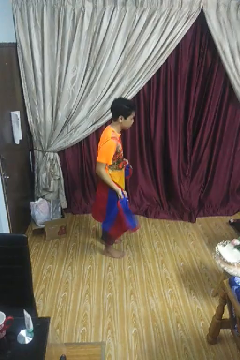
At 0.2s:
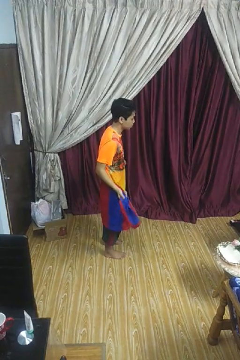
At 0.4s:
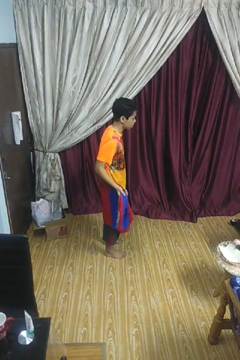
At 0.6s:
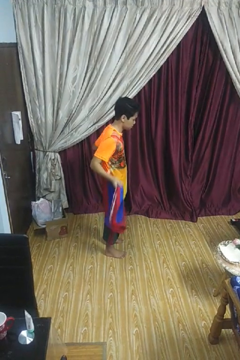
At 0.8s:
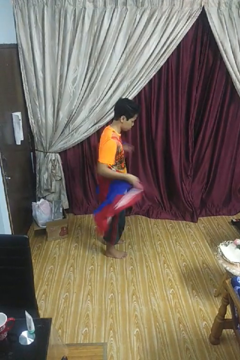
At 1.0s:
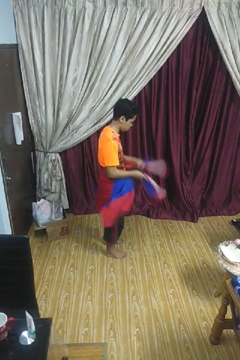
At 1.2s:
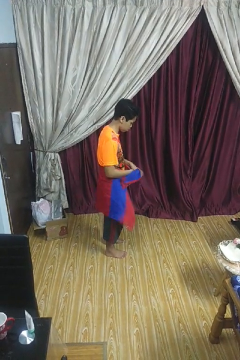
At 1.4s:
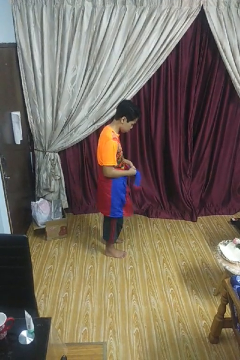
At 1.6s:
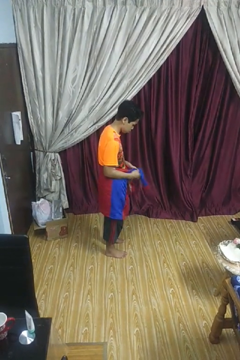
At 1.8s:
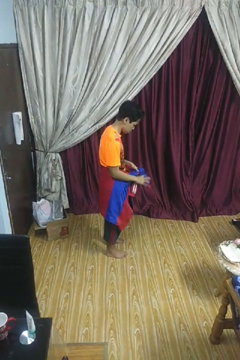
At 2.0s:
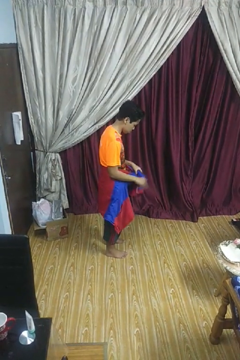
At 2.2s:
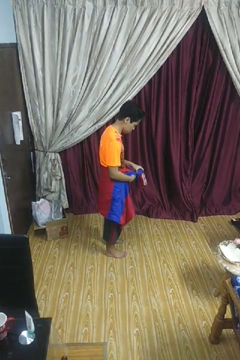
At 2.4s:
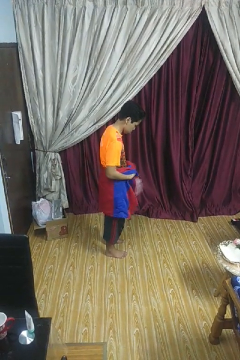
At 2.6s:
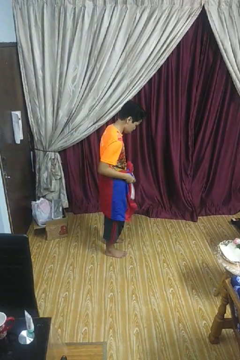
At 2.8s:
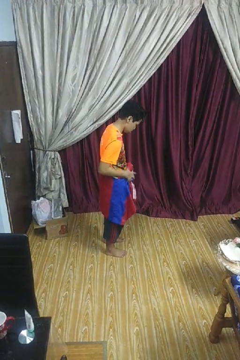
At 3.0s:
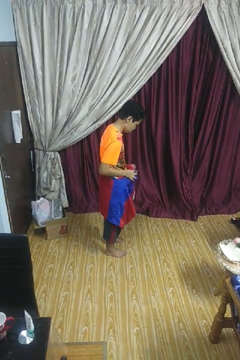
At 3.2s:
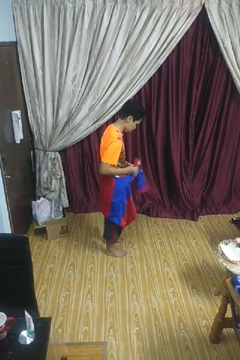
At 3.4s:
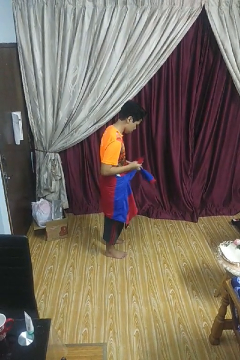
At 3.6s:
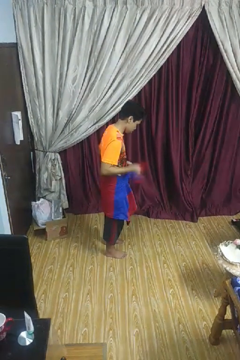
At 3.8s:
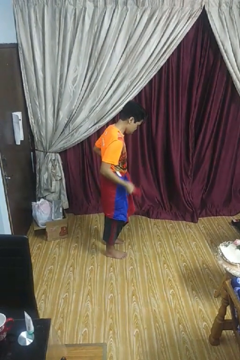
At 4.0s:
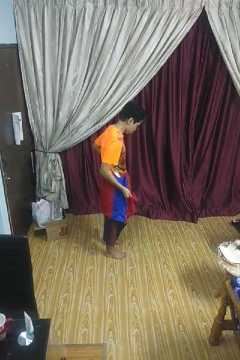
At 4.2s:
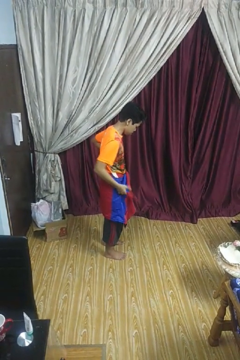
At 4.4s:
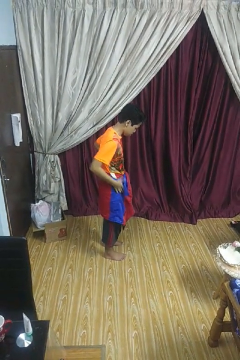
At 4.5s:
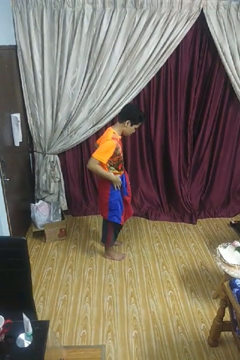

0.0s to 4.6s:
person ties jacket around waist

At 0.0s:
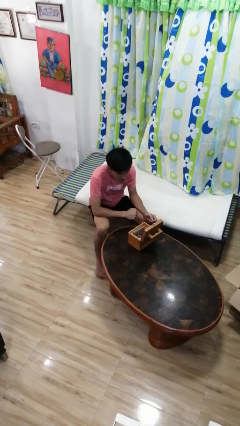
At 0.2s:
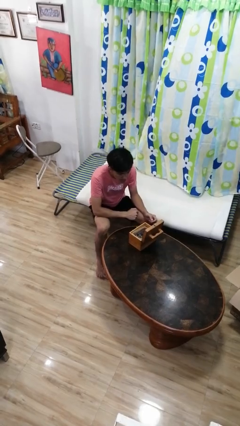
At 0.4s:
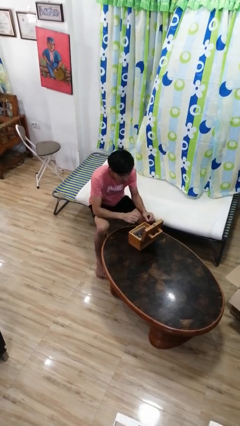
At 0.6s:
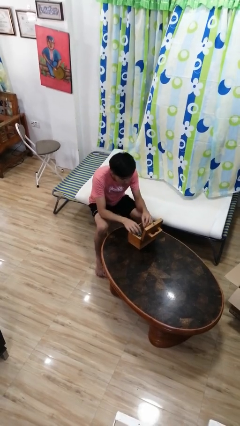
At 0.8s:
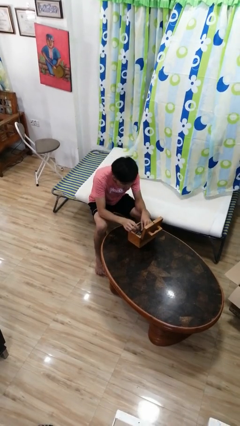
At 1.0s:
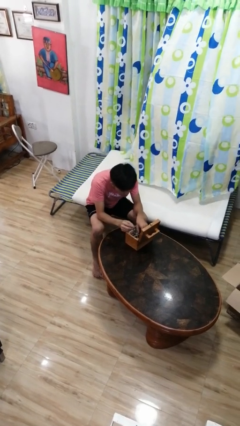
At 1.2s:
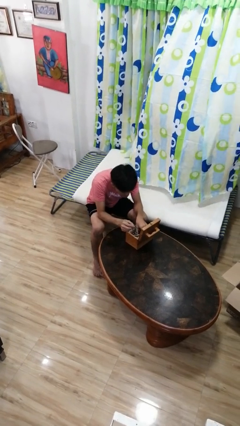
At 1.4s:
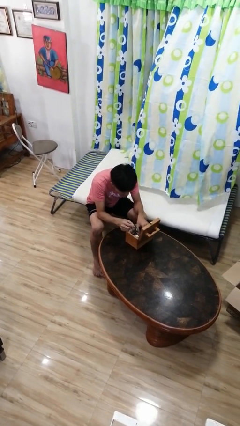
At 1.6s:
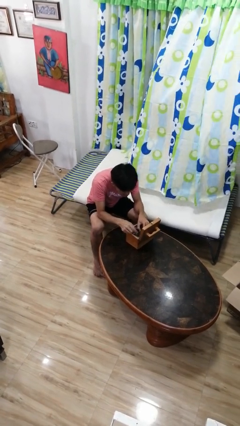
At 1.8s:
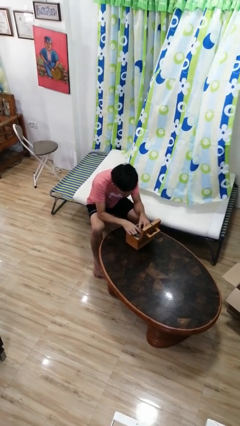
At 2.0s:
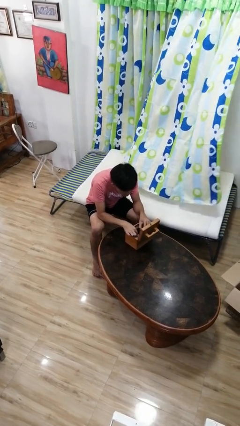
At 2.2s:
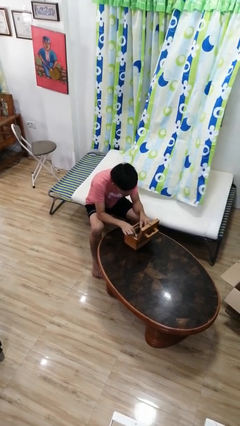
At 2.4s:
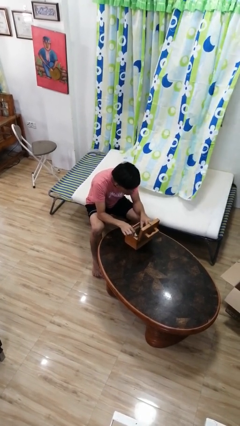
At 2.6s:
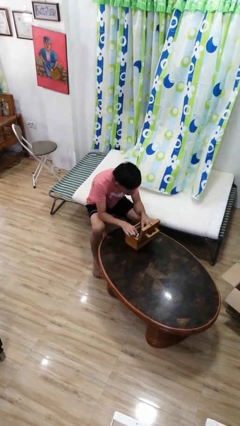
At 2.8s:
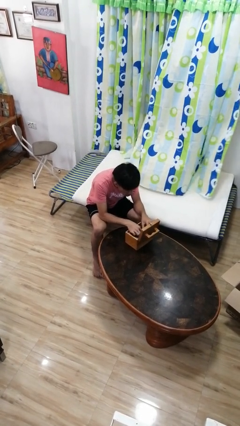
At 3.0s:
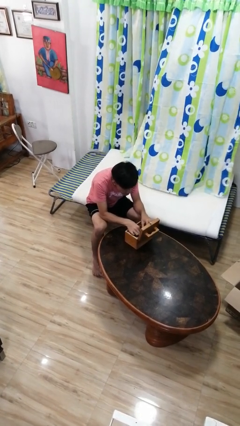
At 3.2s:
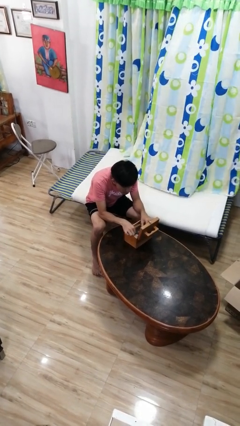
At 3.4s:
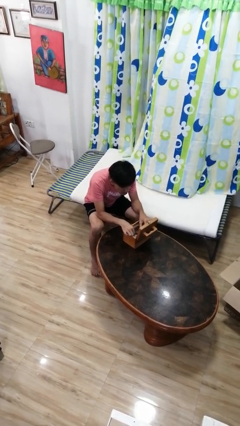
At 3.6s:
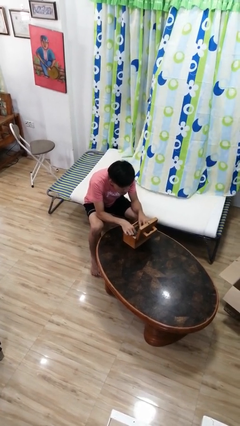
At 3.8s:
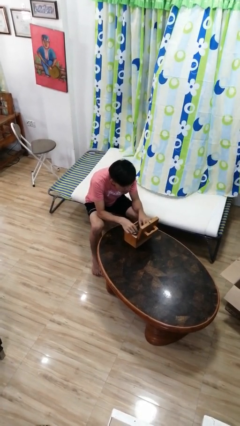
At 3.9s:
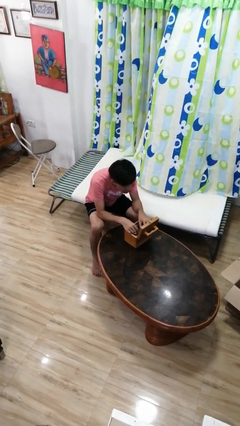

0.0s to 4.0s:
person searches jewelry box

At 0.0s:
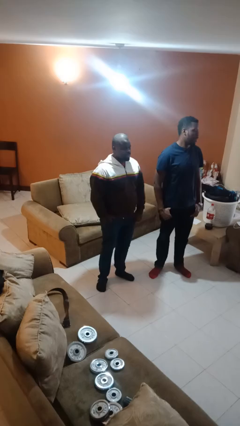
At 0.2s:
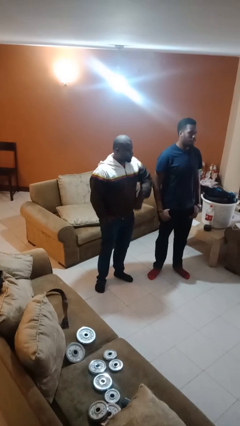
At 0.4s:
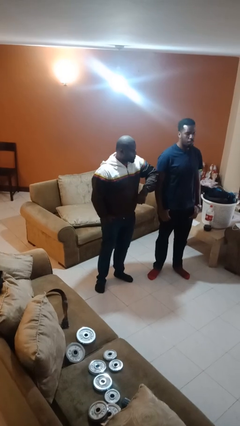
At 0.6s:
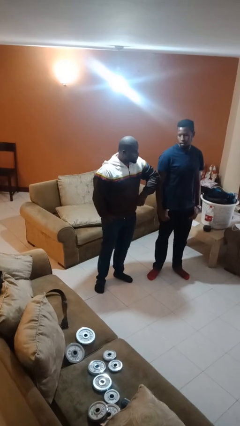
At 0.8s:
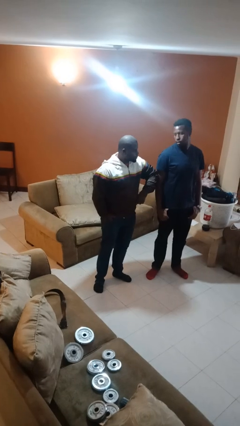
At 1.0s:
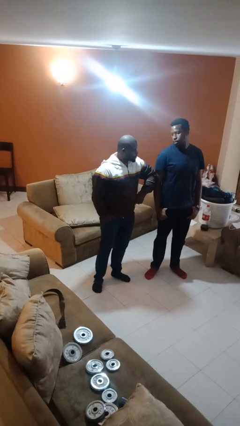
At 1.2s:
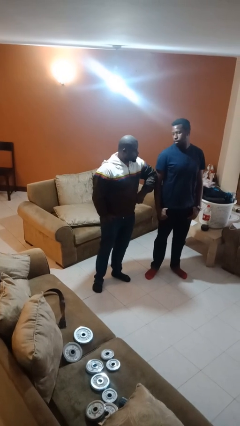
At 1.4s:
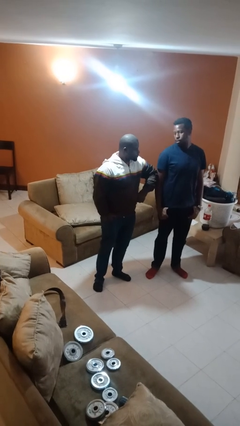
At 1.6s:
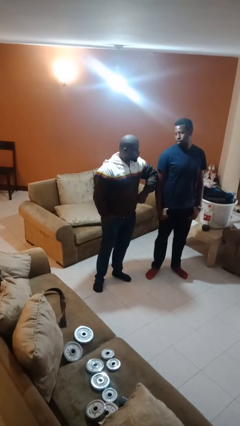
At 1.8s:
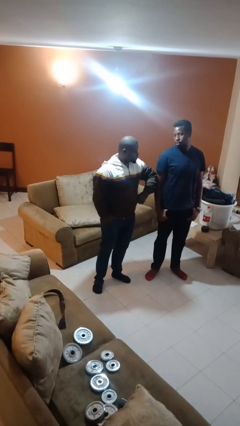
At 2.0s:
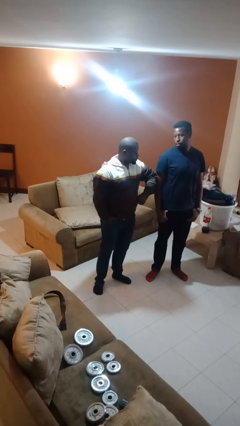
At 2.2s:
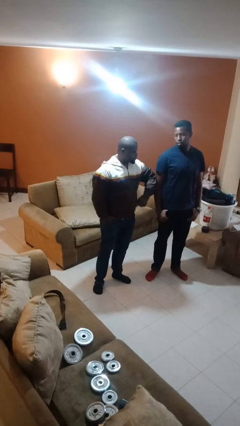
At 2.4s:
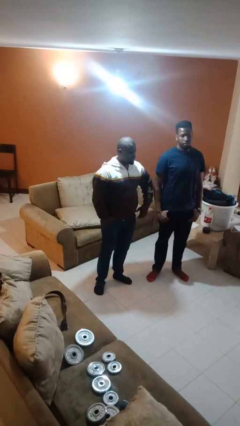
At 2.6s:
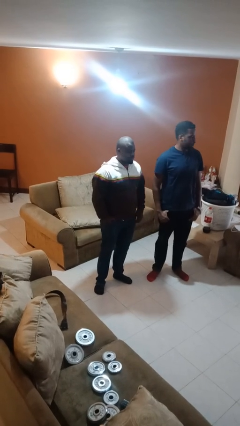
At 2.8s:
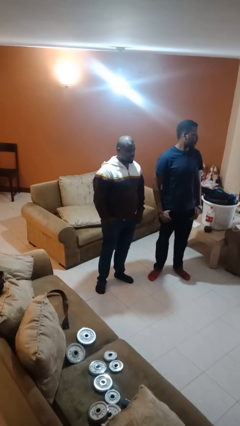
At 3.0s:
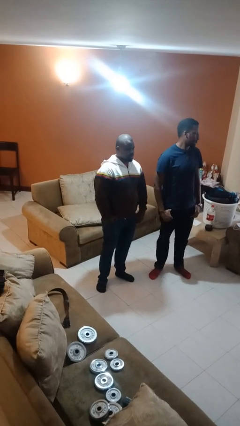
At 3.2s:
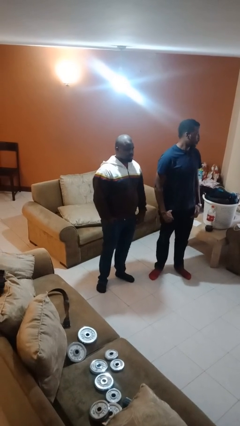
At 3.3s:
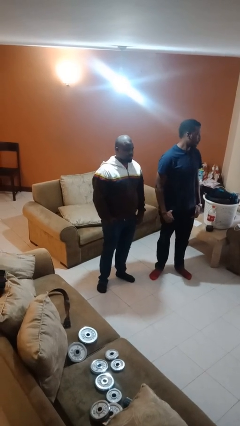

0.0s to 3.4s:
person nudges person with elbow

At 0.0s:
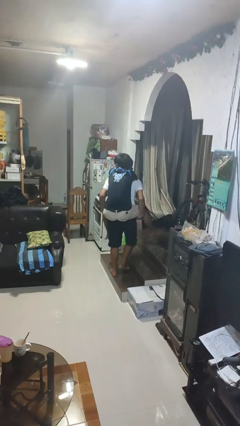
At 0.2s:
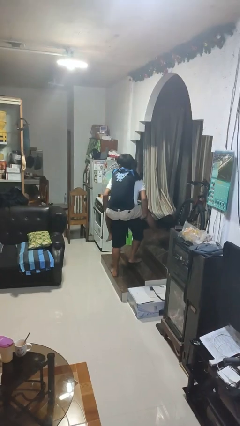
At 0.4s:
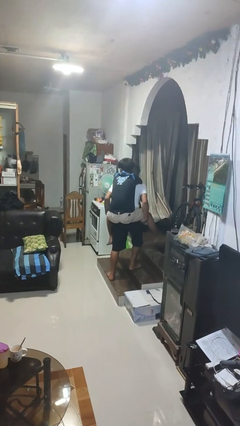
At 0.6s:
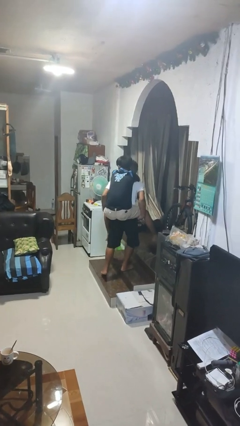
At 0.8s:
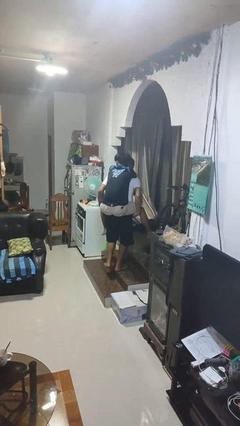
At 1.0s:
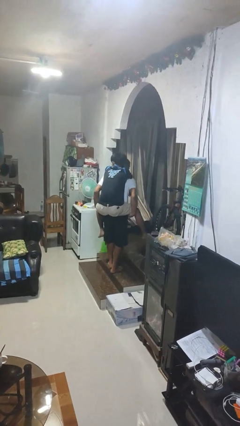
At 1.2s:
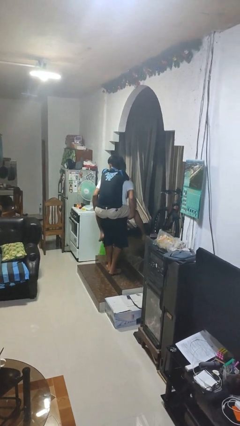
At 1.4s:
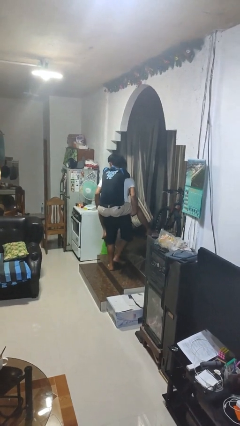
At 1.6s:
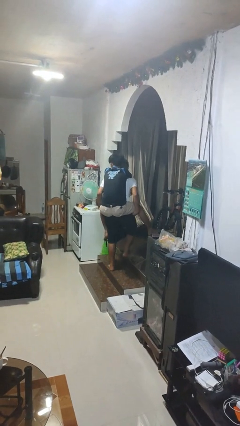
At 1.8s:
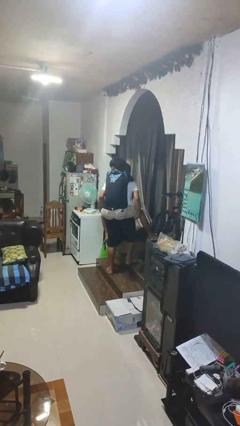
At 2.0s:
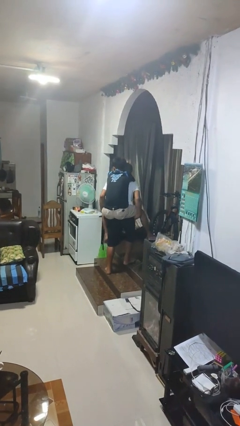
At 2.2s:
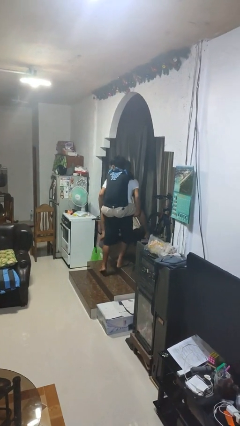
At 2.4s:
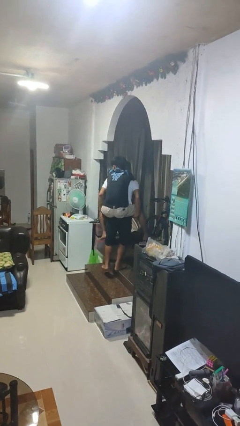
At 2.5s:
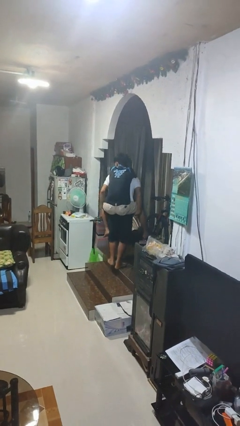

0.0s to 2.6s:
person carries person on back

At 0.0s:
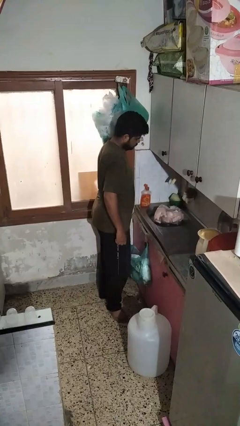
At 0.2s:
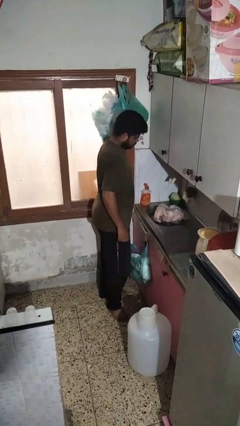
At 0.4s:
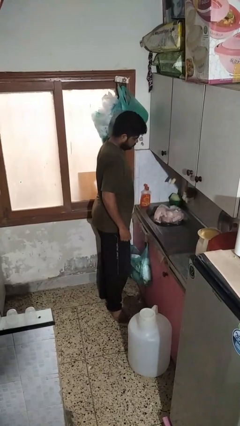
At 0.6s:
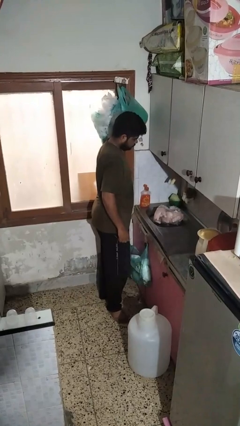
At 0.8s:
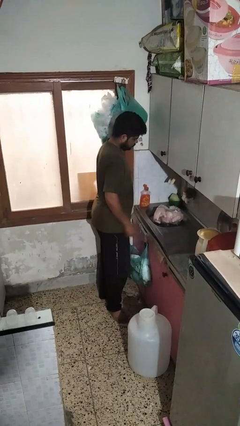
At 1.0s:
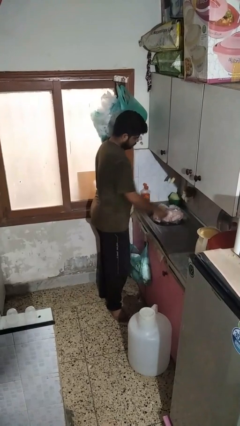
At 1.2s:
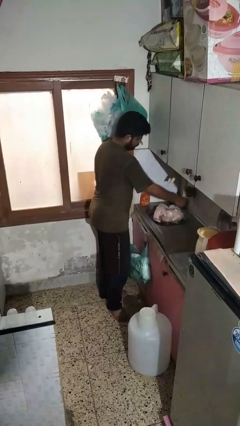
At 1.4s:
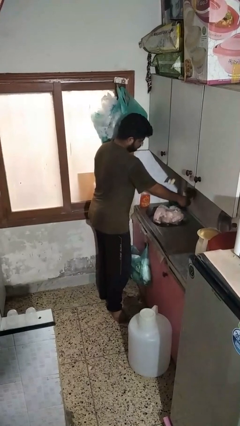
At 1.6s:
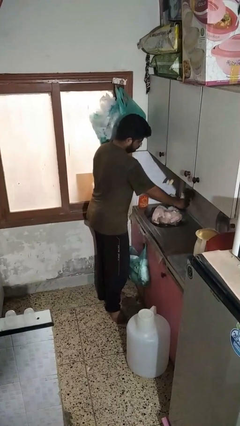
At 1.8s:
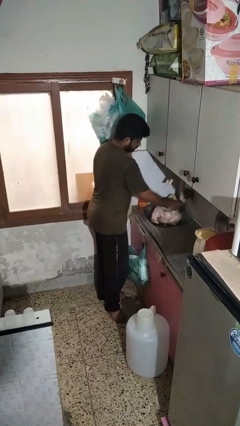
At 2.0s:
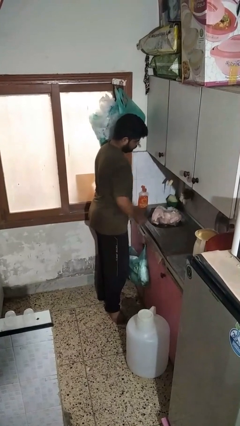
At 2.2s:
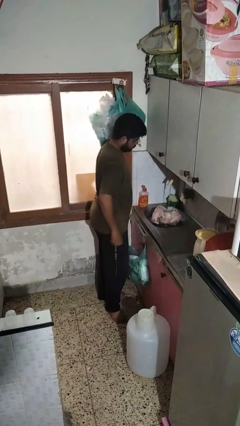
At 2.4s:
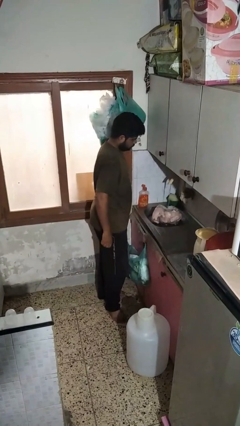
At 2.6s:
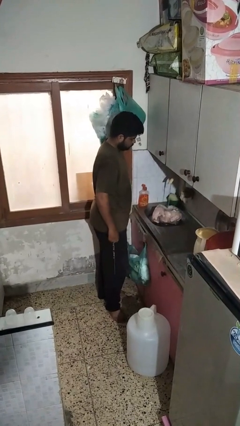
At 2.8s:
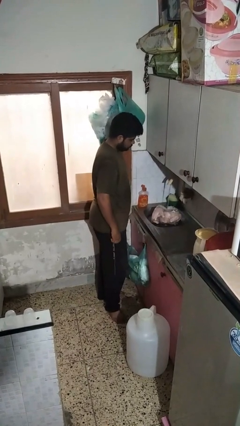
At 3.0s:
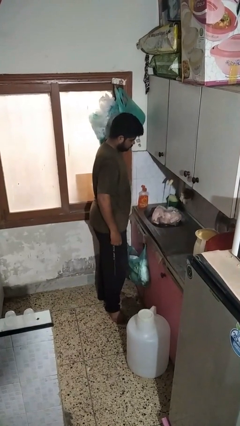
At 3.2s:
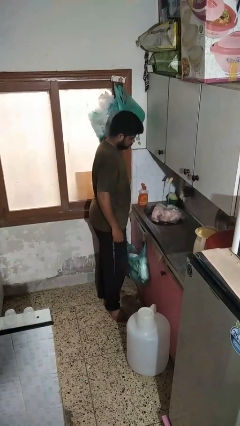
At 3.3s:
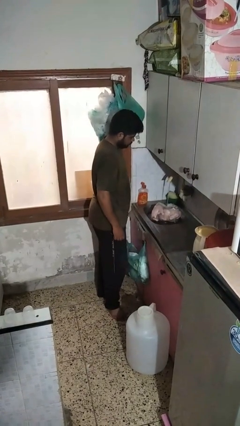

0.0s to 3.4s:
person turns on faucet

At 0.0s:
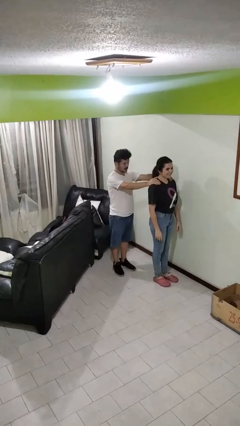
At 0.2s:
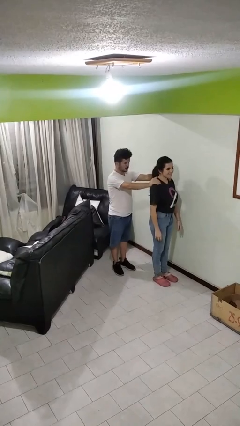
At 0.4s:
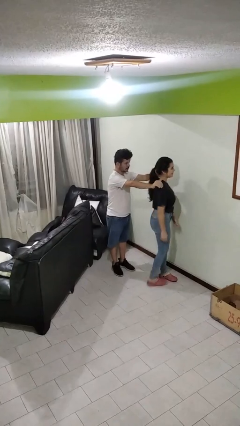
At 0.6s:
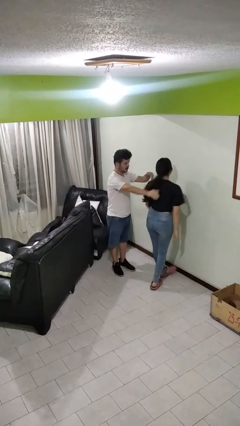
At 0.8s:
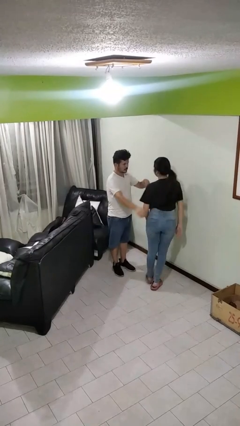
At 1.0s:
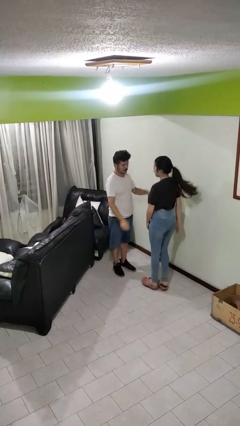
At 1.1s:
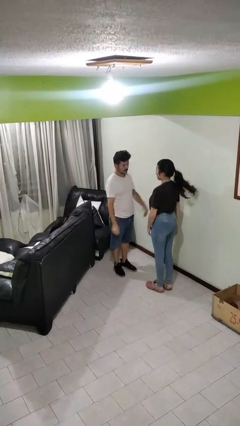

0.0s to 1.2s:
person spins person around
